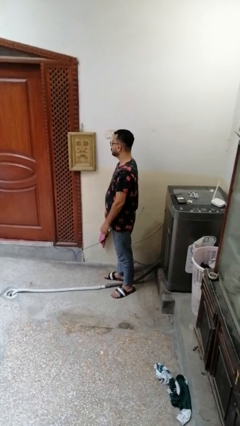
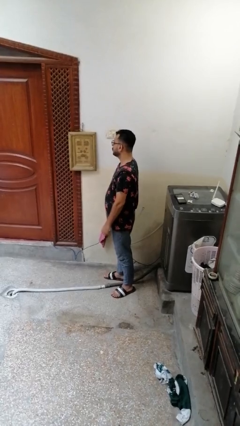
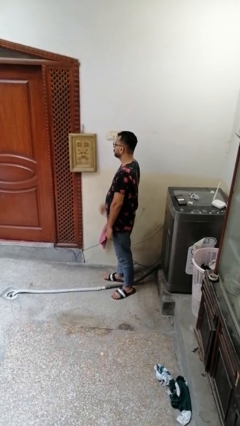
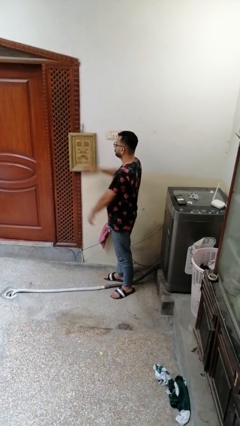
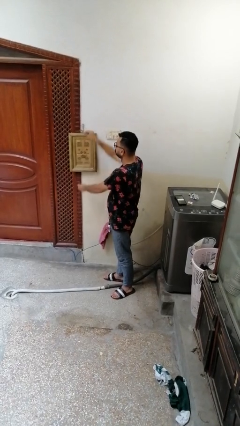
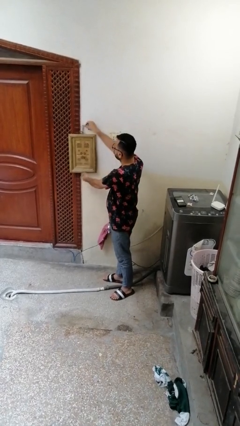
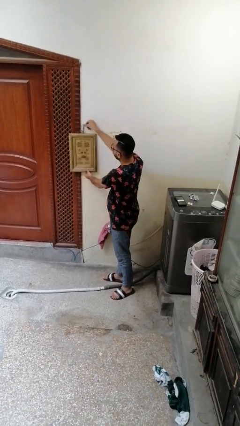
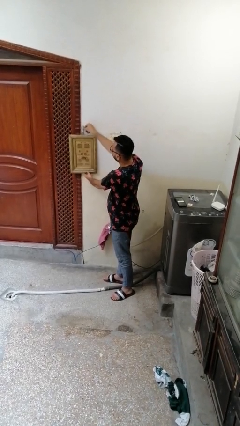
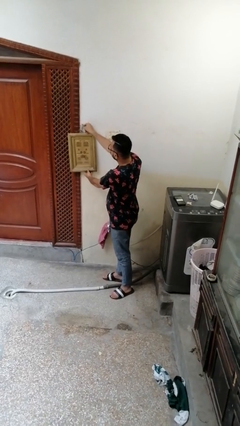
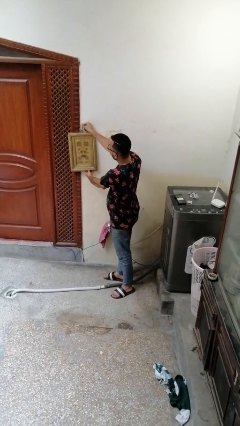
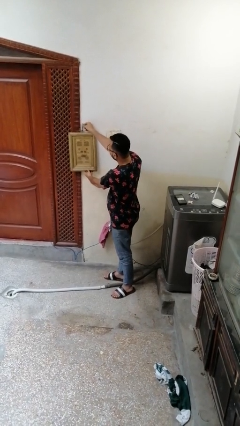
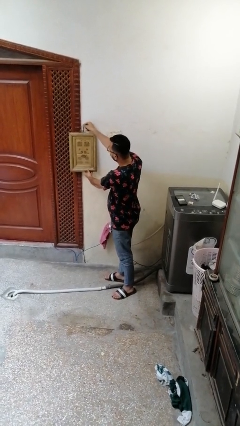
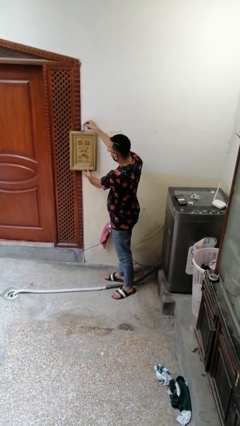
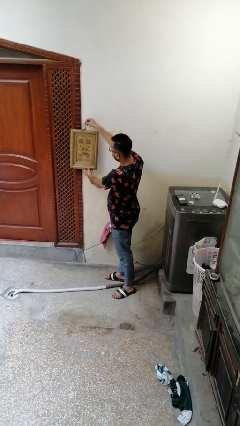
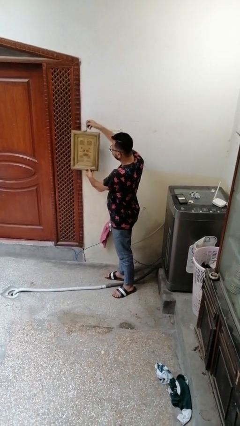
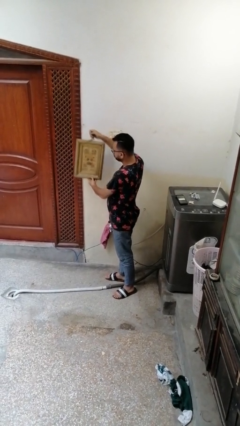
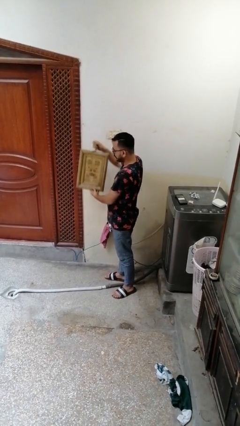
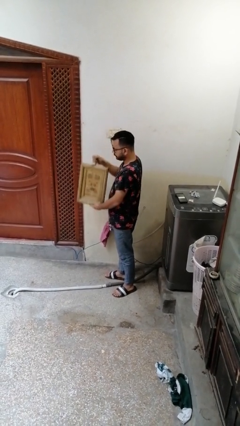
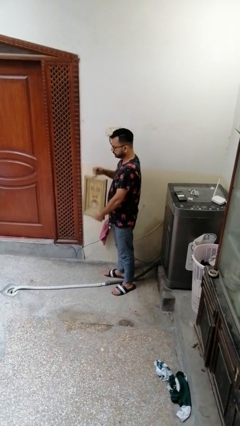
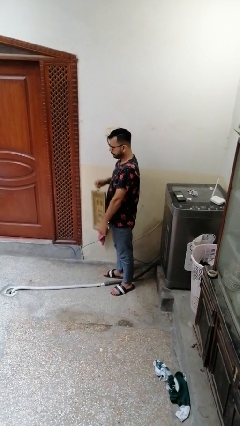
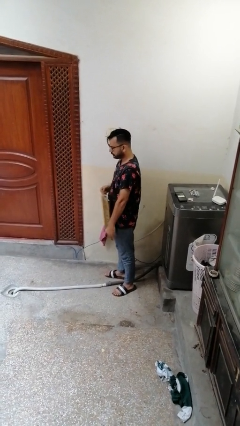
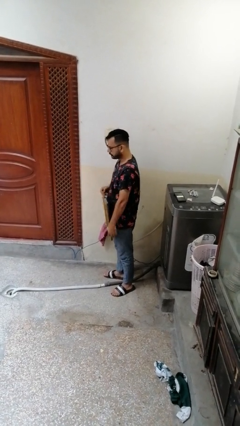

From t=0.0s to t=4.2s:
person takes down picture frame

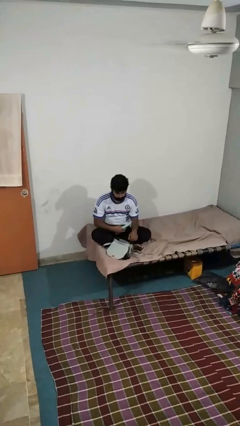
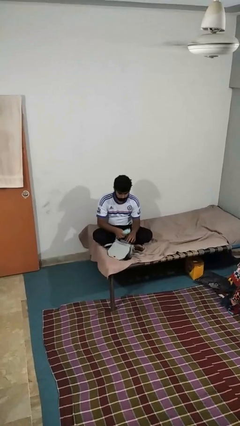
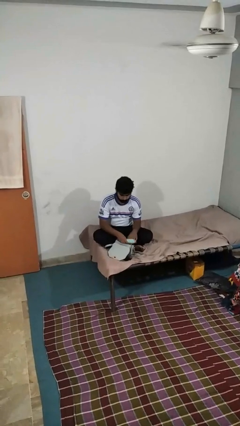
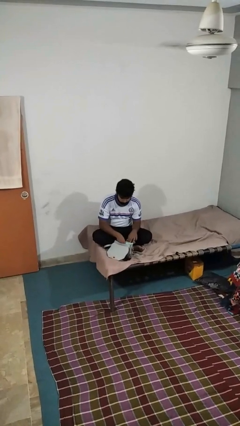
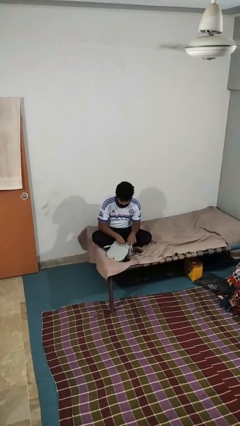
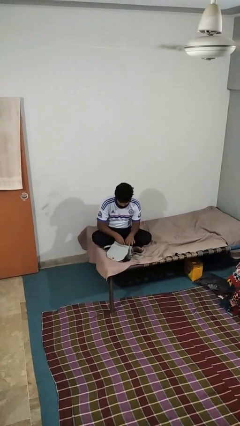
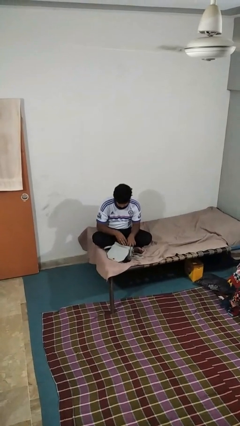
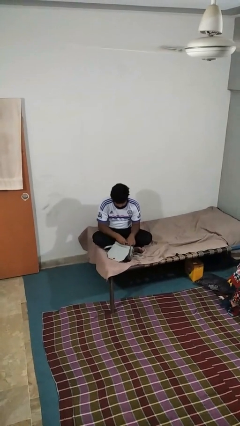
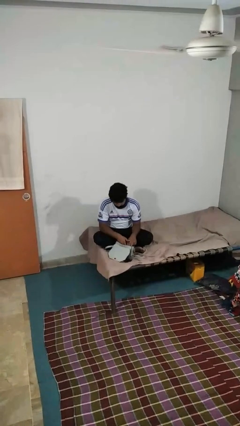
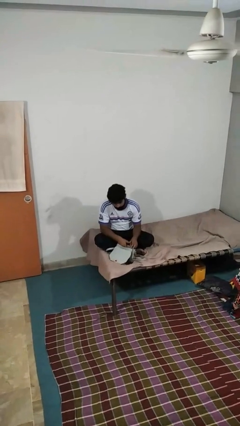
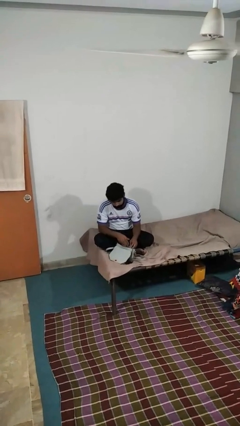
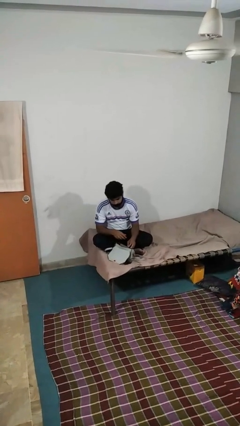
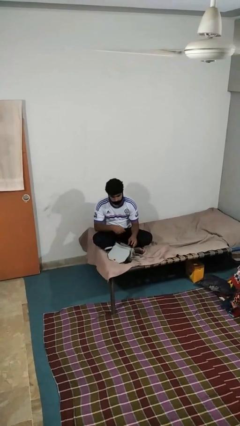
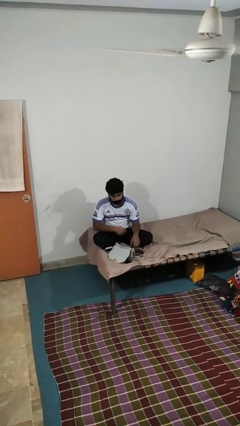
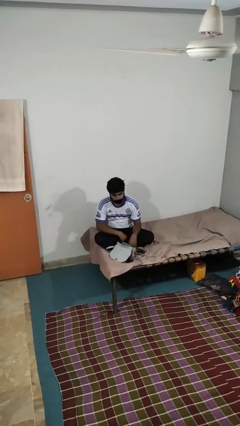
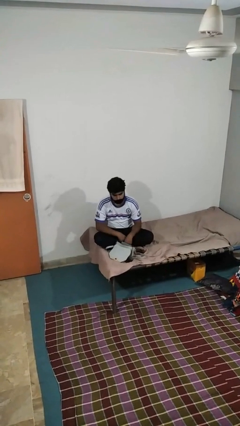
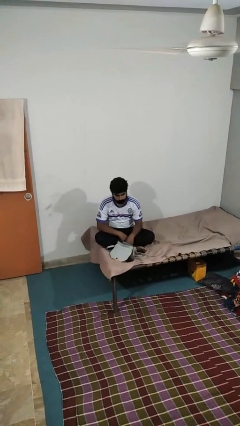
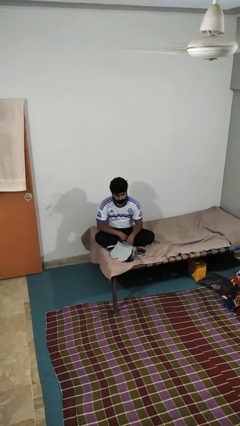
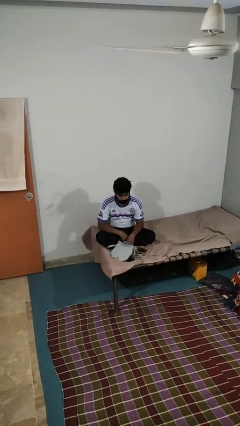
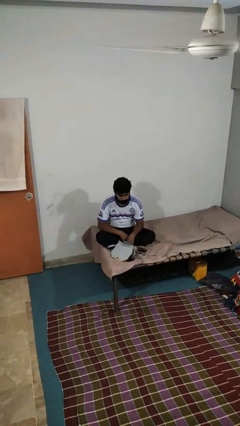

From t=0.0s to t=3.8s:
person puts object into purse

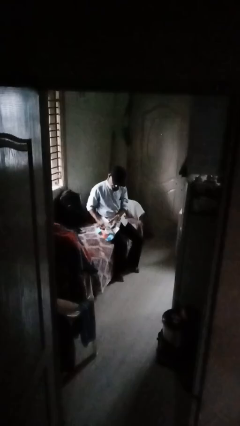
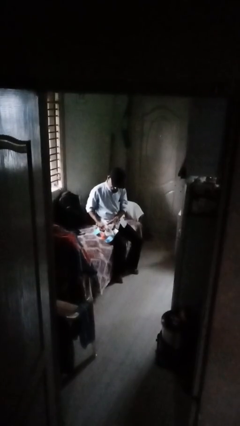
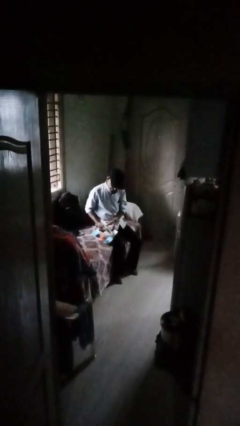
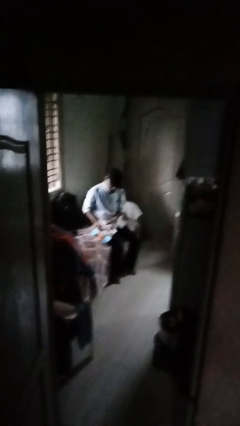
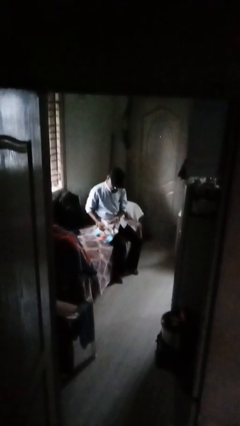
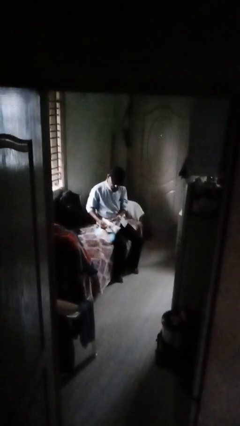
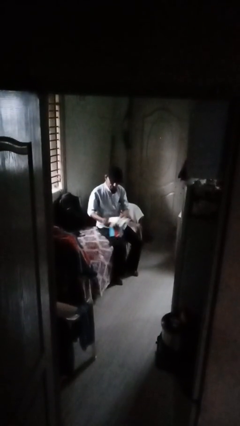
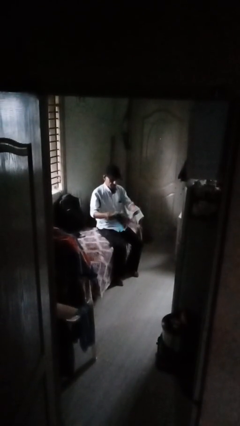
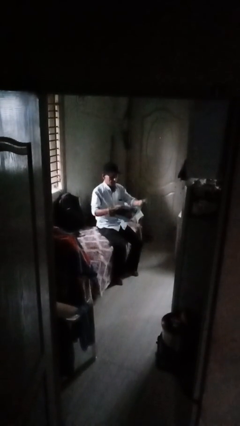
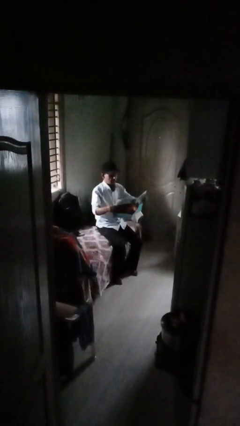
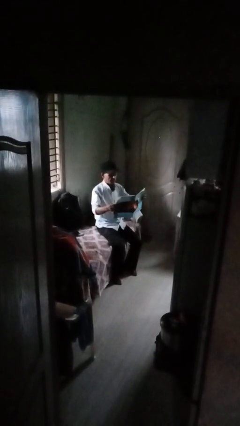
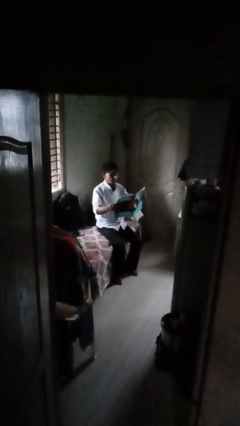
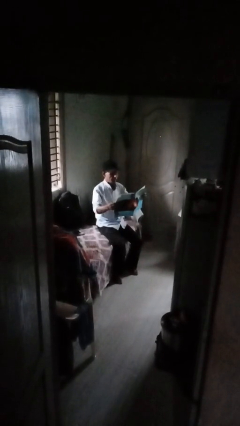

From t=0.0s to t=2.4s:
person reads magazine

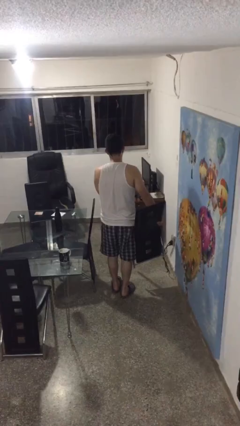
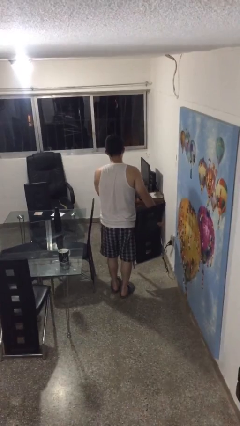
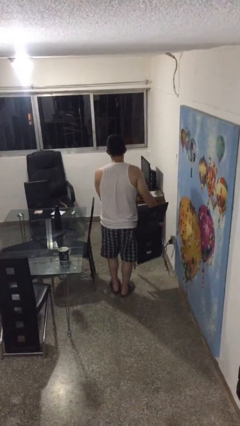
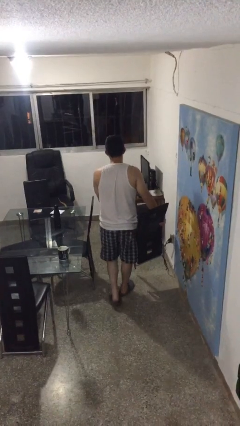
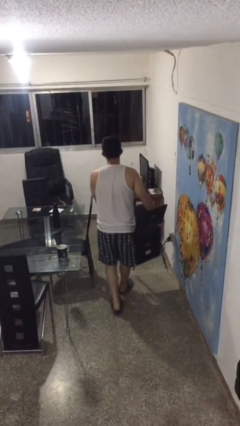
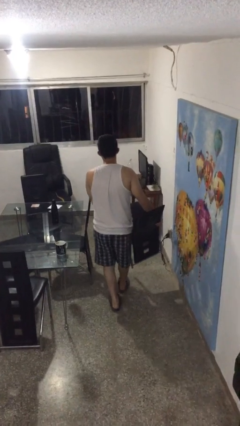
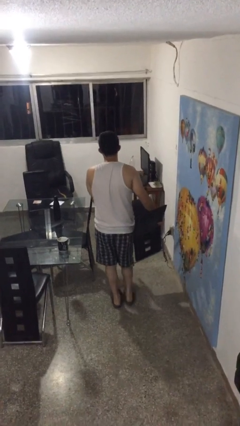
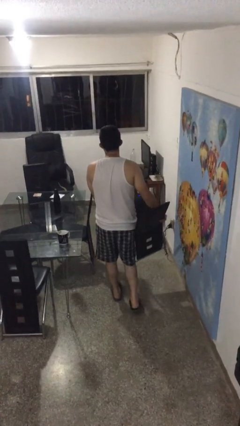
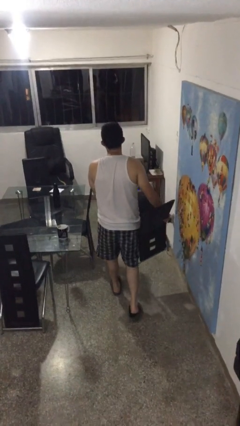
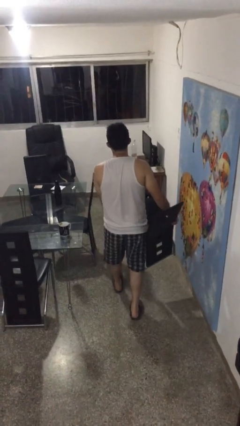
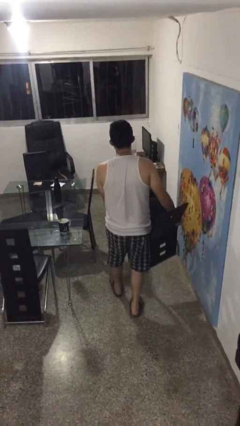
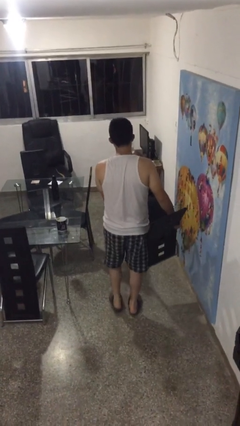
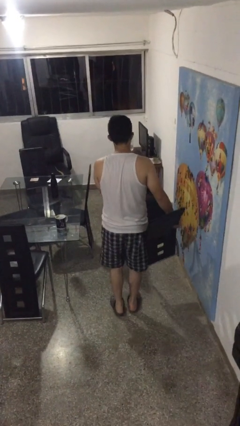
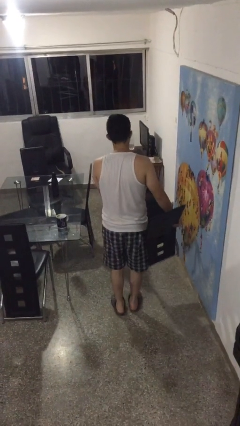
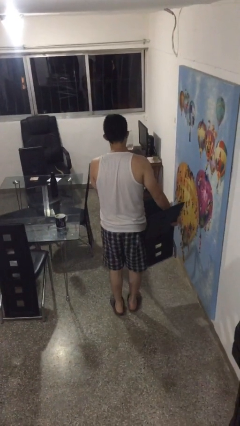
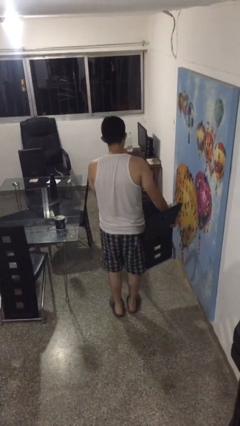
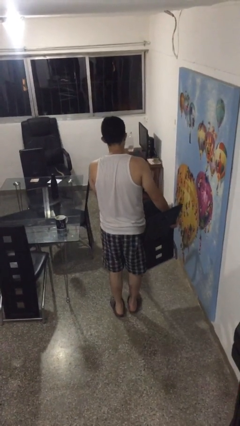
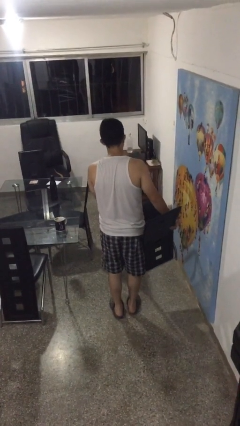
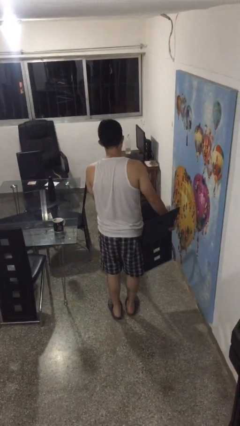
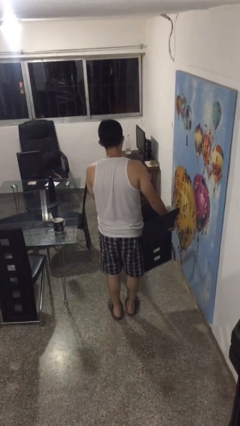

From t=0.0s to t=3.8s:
person carries furniture

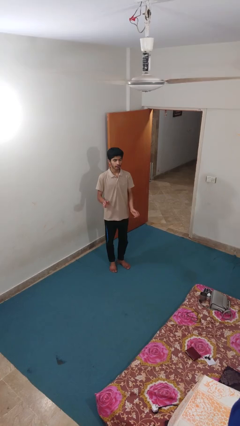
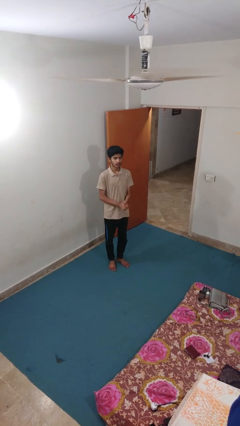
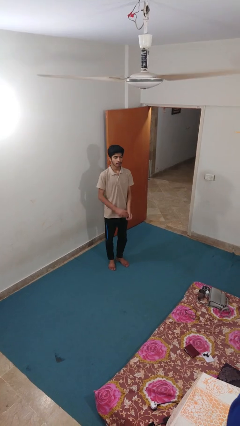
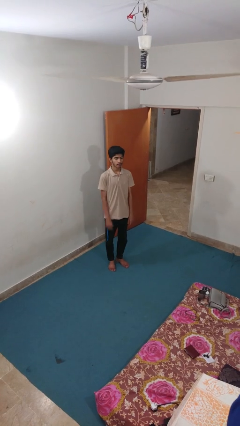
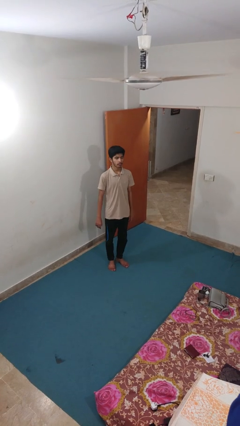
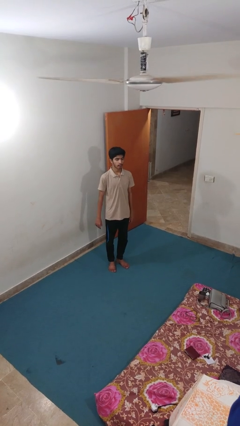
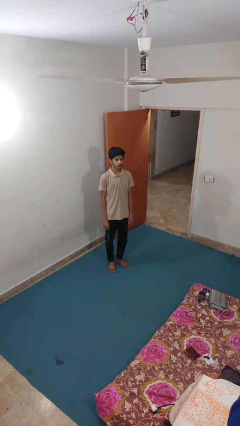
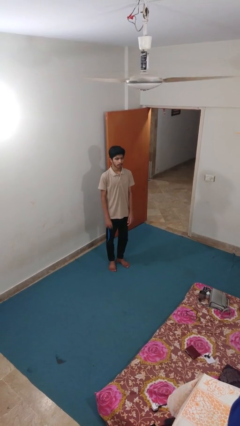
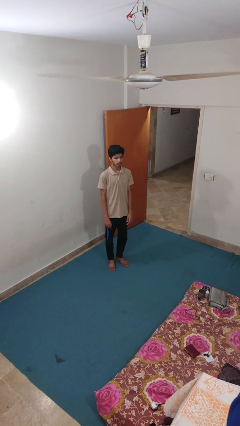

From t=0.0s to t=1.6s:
person claps hands

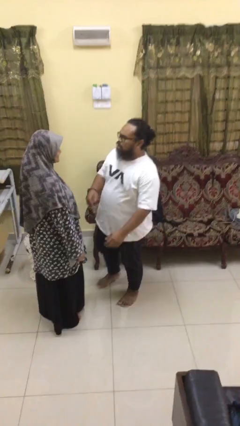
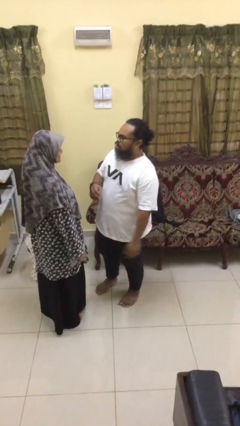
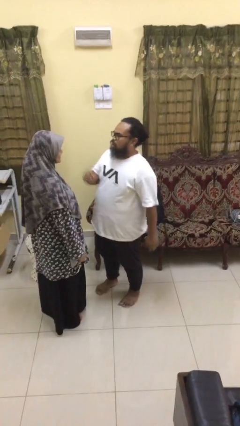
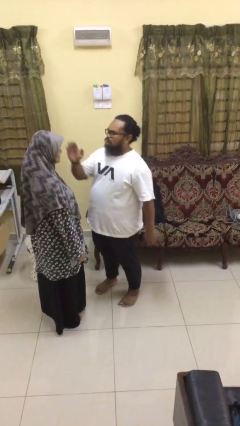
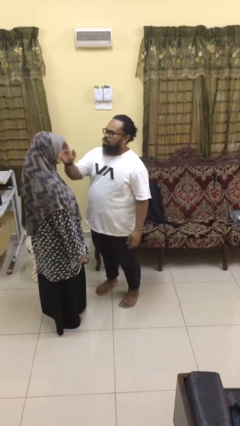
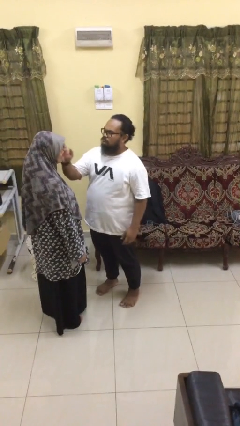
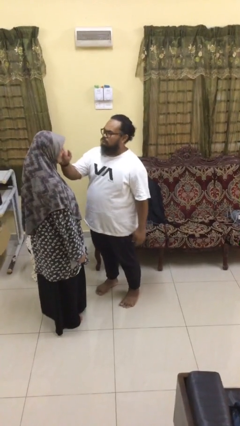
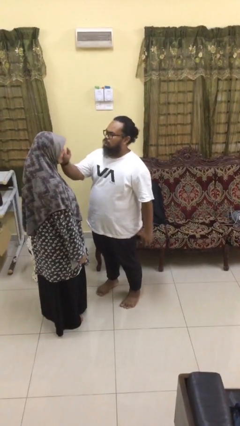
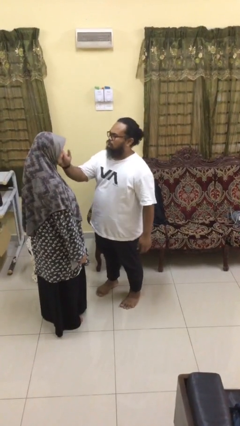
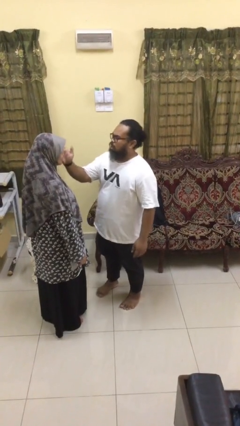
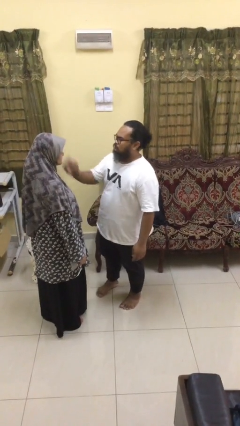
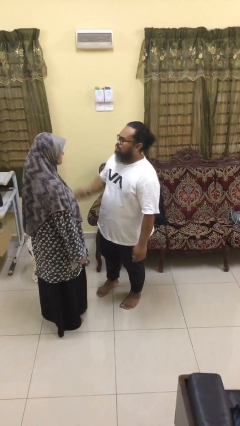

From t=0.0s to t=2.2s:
person touches face of person
